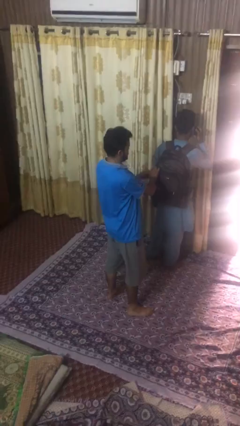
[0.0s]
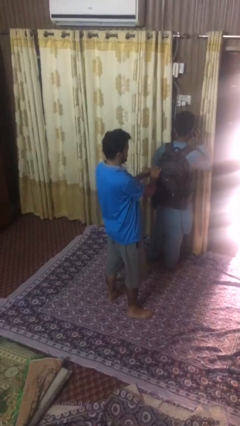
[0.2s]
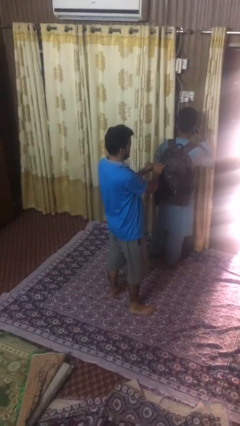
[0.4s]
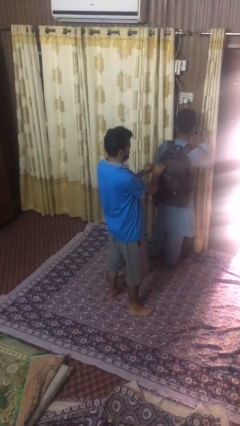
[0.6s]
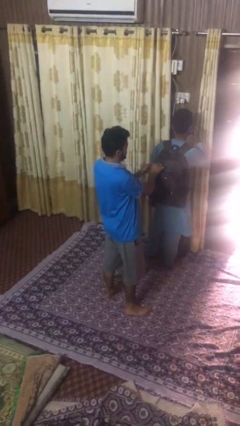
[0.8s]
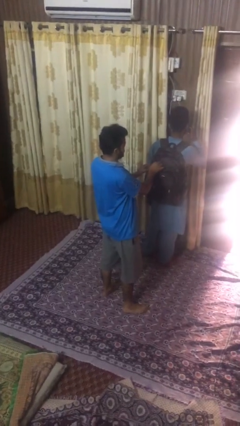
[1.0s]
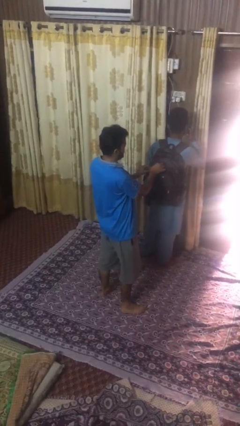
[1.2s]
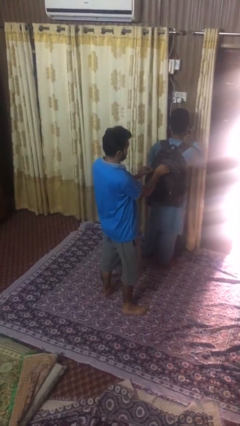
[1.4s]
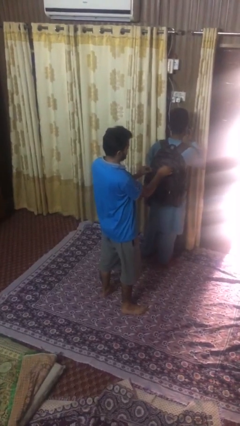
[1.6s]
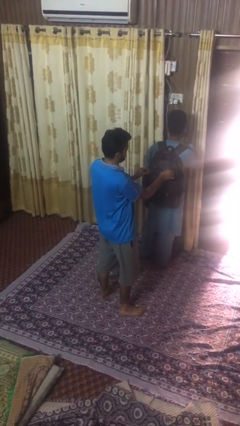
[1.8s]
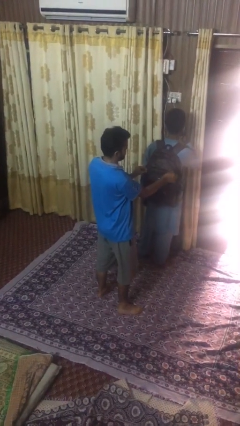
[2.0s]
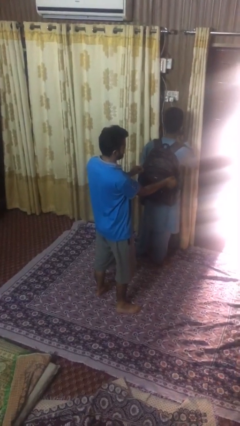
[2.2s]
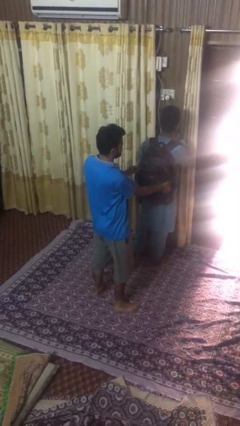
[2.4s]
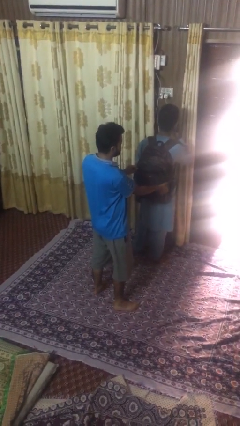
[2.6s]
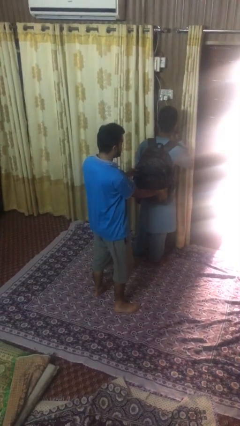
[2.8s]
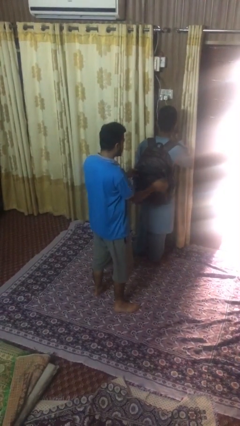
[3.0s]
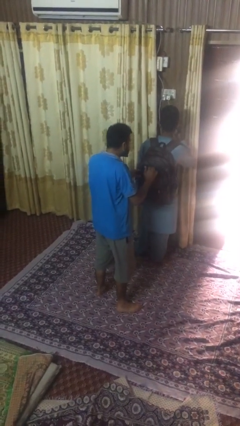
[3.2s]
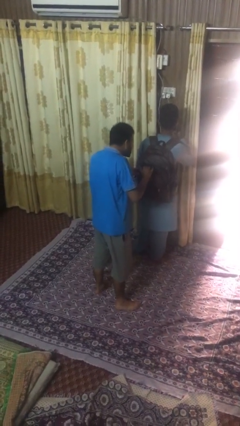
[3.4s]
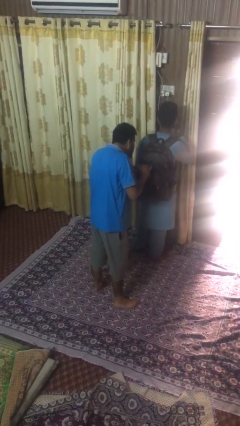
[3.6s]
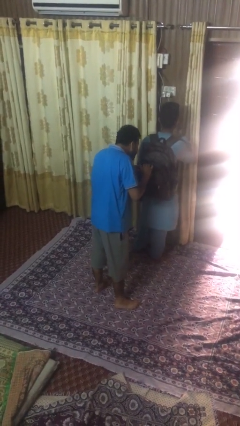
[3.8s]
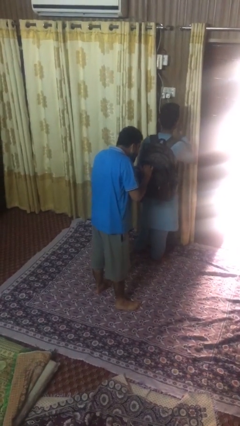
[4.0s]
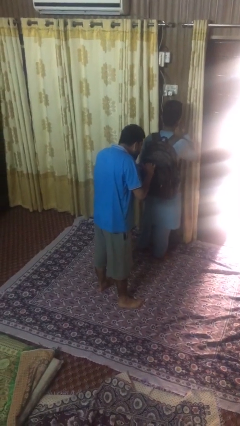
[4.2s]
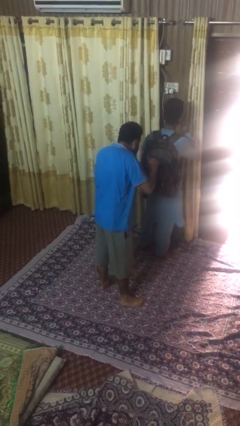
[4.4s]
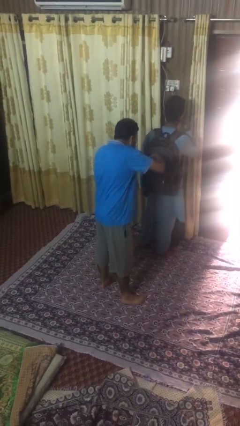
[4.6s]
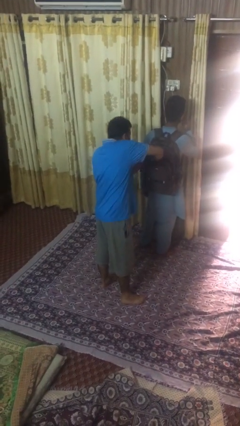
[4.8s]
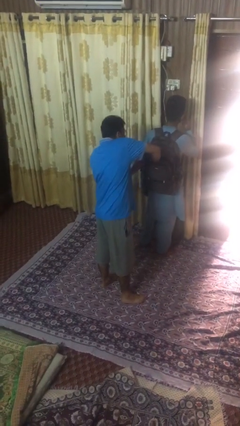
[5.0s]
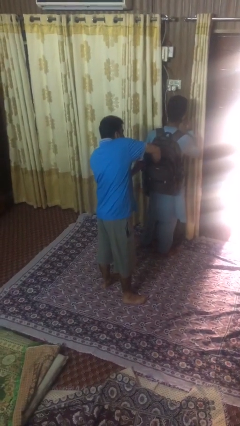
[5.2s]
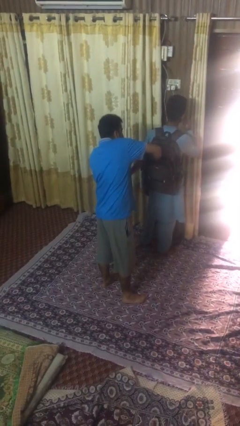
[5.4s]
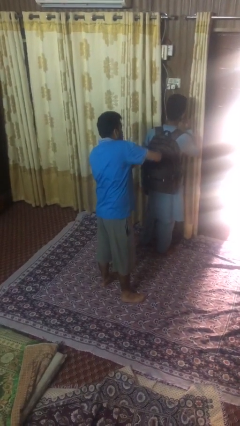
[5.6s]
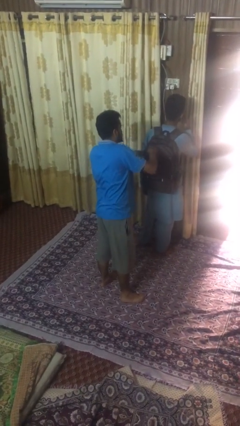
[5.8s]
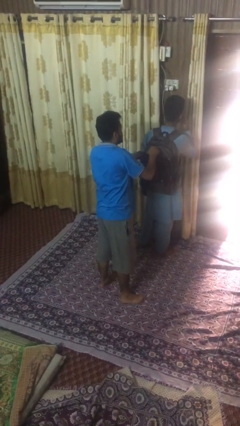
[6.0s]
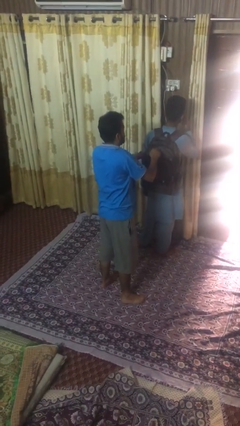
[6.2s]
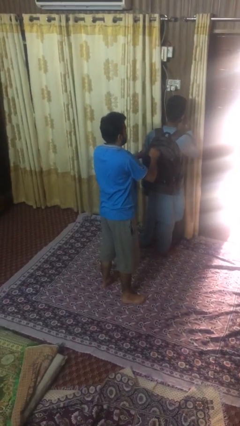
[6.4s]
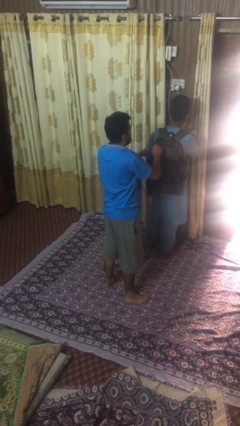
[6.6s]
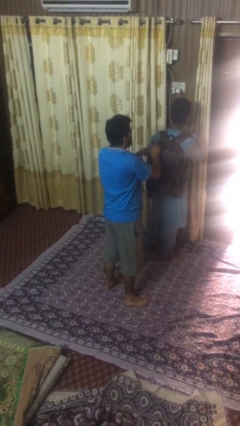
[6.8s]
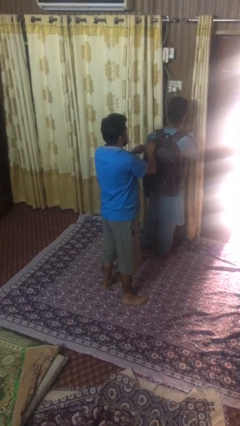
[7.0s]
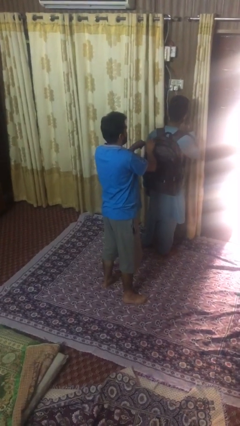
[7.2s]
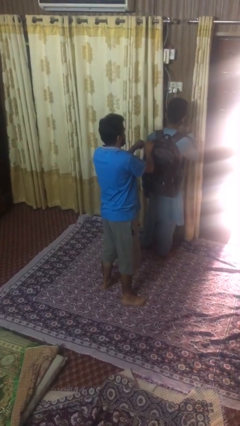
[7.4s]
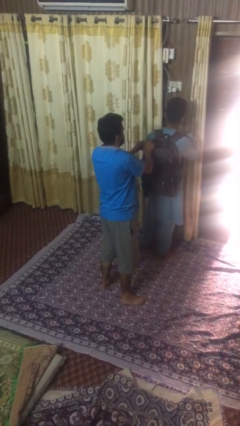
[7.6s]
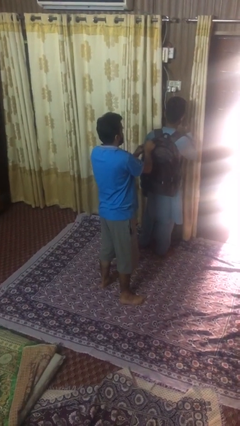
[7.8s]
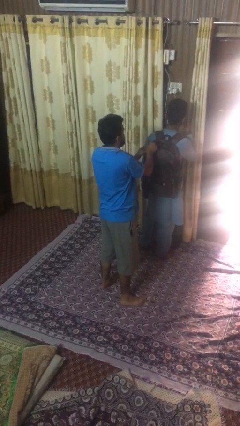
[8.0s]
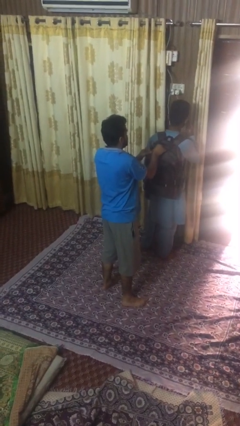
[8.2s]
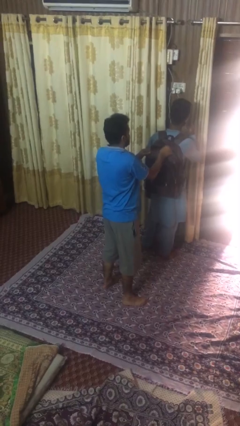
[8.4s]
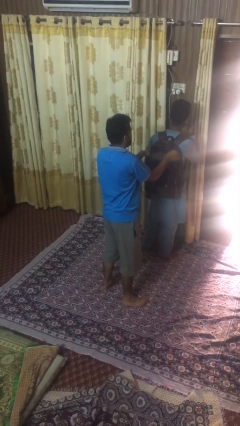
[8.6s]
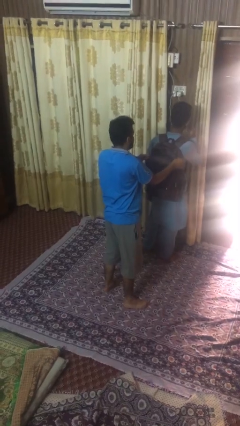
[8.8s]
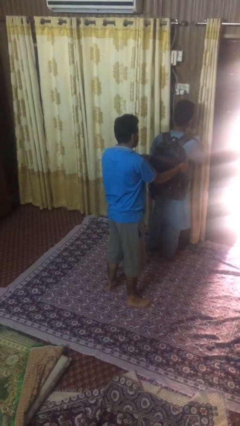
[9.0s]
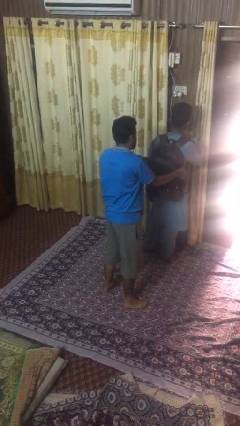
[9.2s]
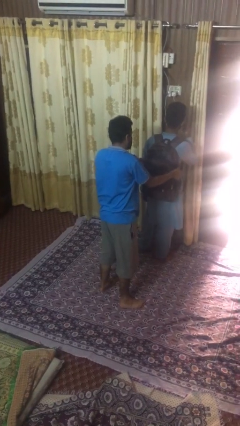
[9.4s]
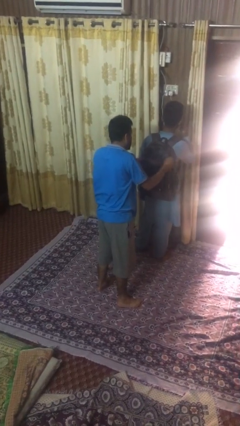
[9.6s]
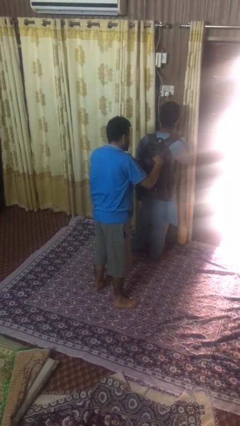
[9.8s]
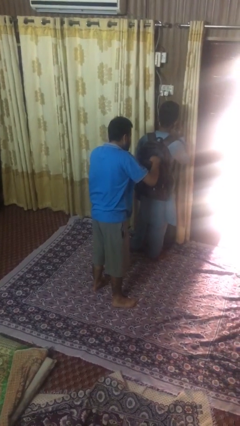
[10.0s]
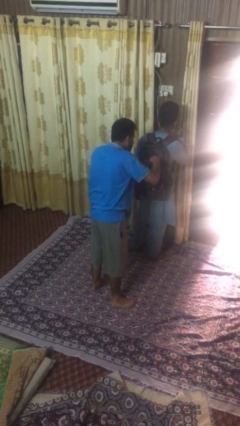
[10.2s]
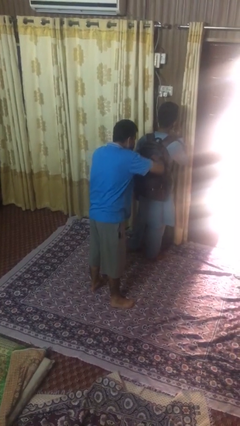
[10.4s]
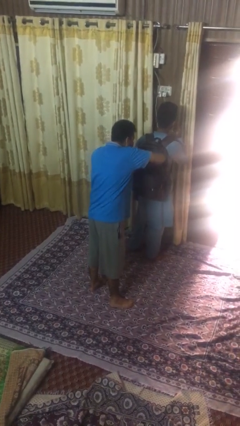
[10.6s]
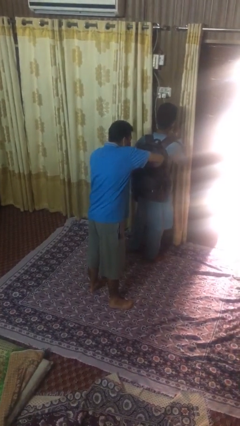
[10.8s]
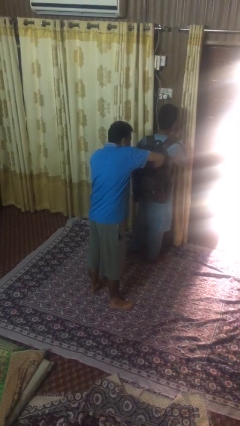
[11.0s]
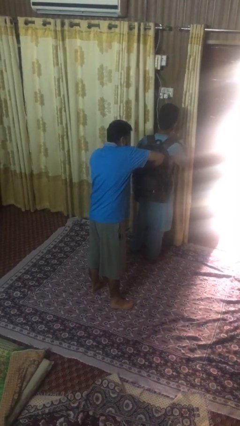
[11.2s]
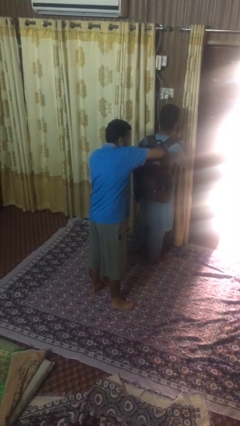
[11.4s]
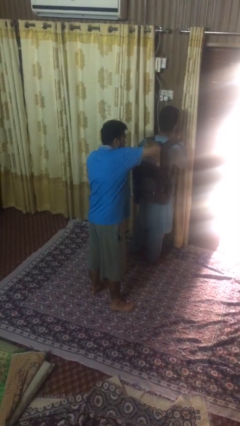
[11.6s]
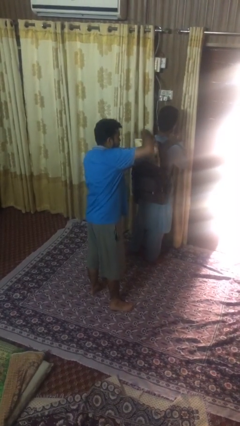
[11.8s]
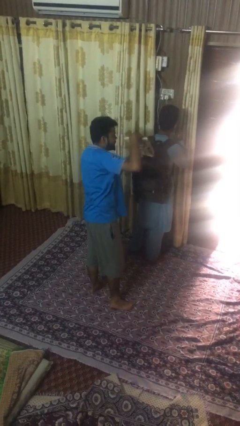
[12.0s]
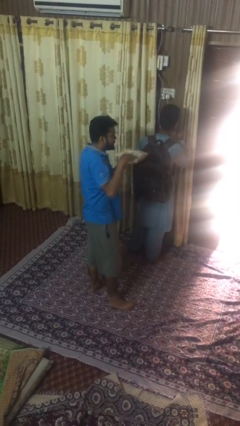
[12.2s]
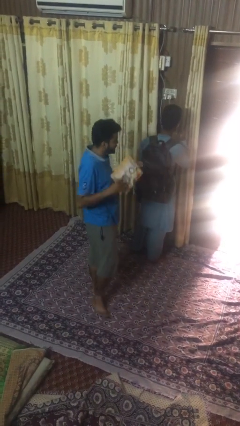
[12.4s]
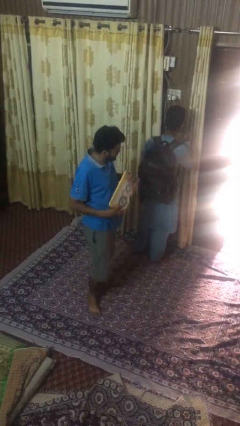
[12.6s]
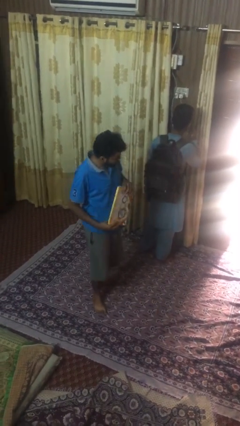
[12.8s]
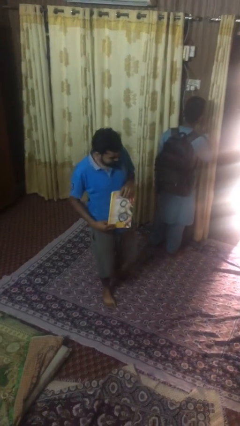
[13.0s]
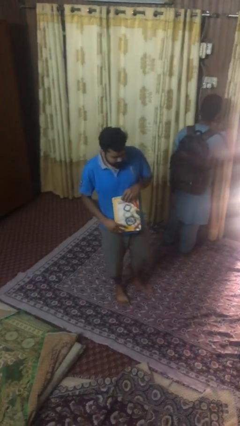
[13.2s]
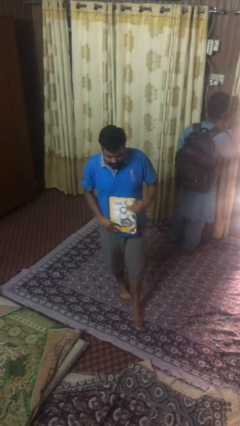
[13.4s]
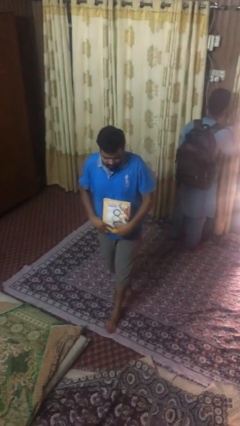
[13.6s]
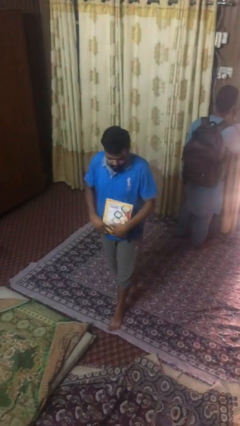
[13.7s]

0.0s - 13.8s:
person steals object from person

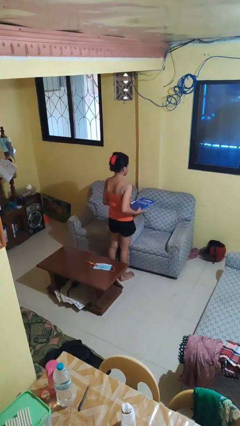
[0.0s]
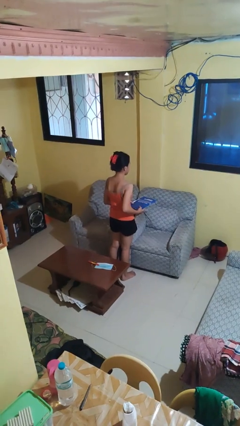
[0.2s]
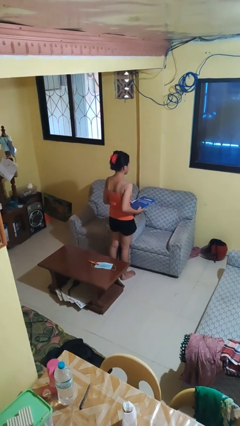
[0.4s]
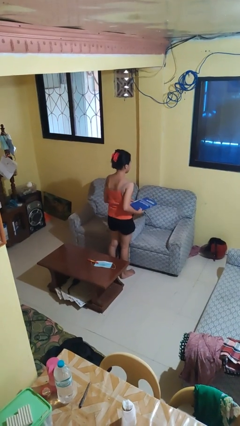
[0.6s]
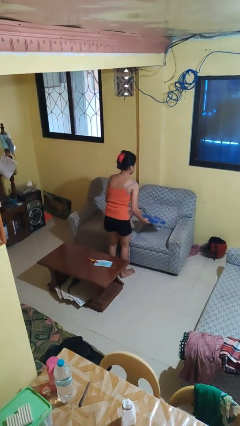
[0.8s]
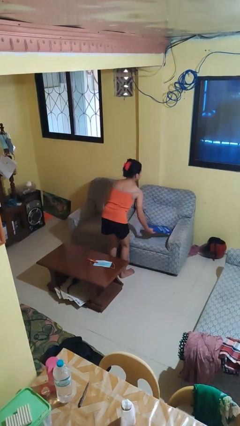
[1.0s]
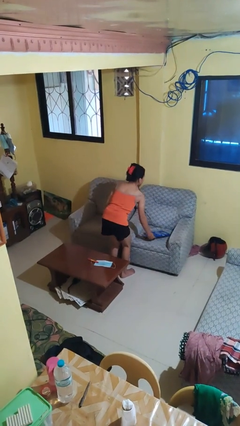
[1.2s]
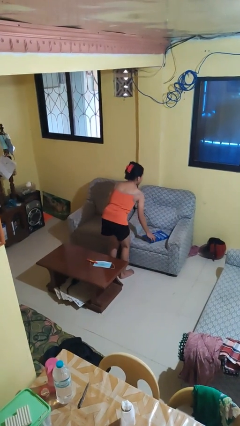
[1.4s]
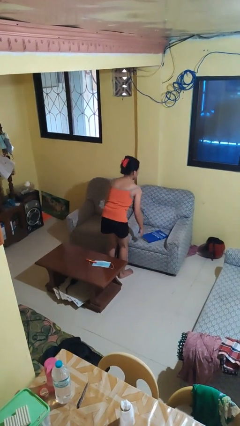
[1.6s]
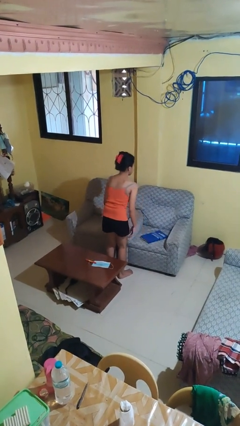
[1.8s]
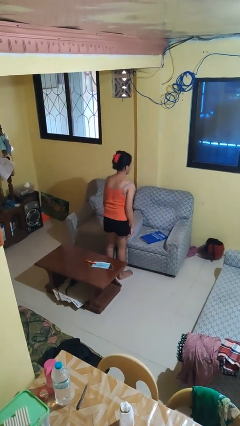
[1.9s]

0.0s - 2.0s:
person puts down object on couch

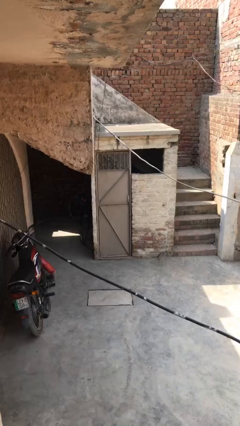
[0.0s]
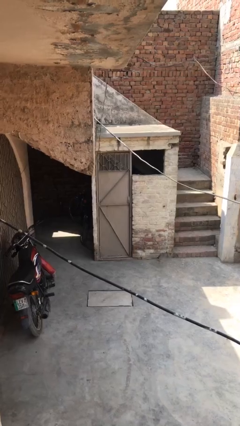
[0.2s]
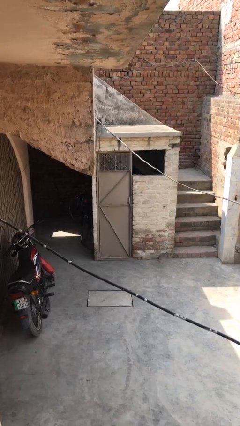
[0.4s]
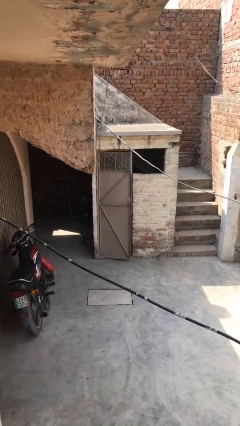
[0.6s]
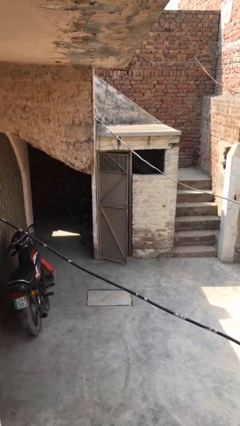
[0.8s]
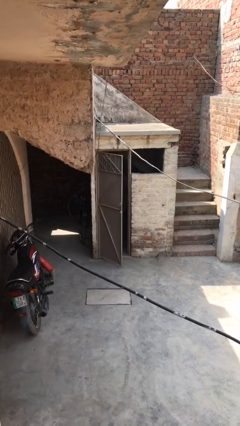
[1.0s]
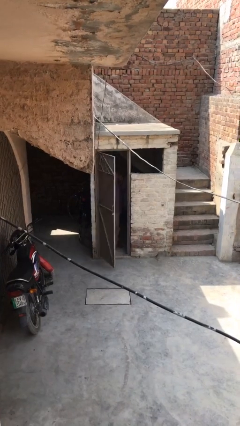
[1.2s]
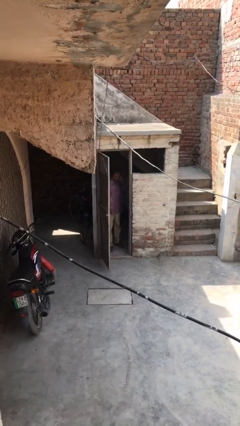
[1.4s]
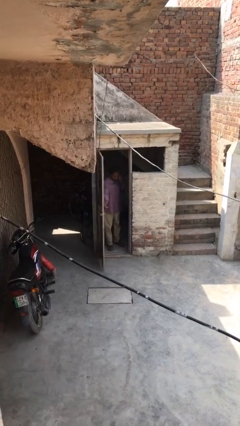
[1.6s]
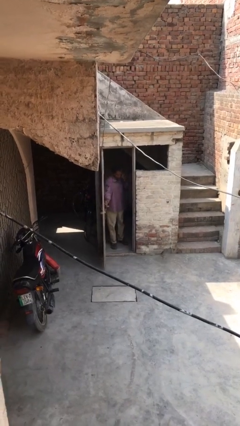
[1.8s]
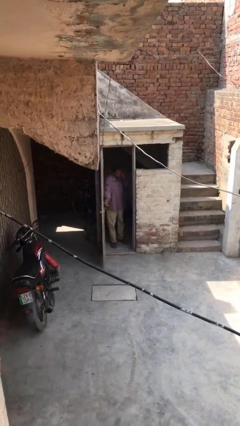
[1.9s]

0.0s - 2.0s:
person opens facility door
